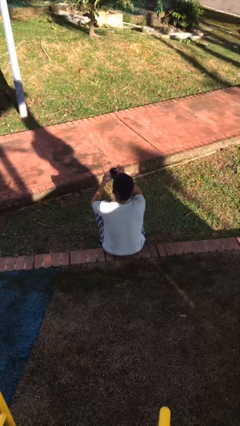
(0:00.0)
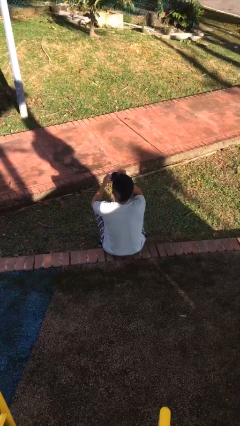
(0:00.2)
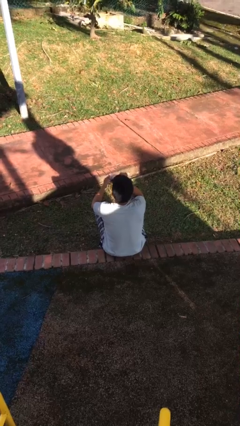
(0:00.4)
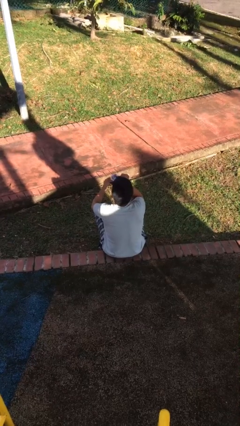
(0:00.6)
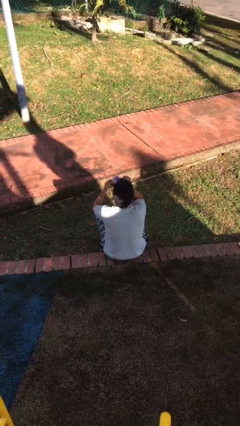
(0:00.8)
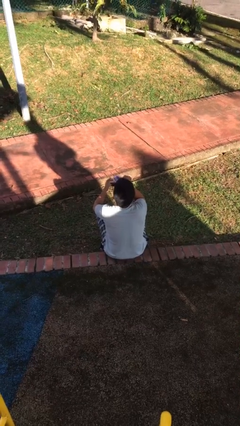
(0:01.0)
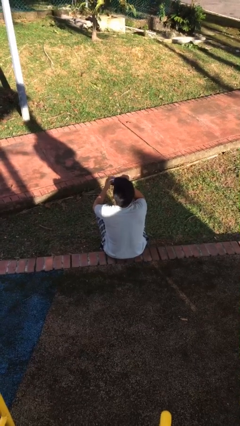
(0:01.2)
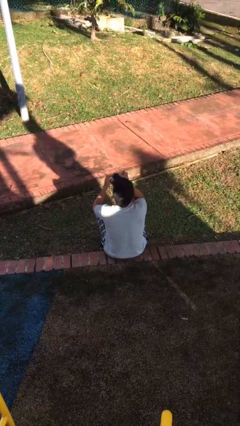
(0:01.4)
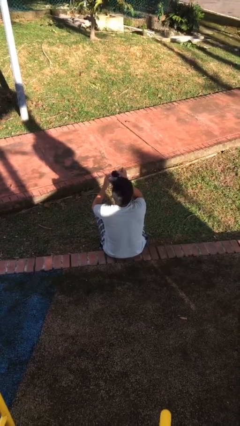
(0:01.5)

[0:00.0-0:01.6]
person drinks from mug

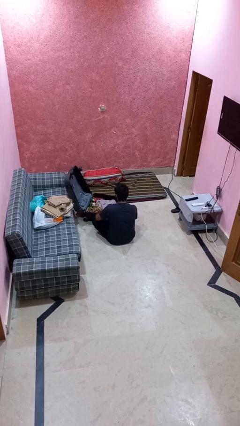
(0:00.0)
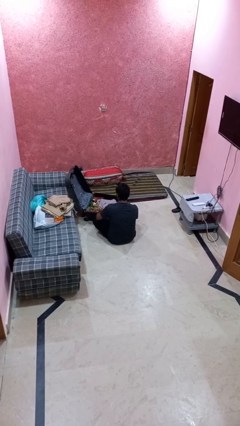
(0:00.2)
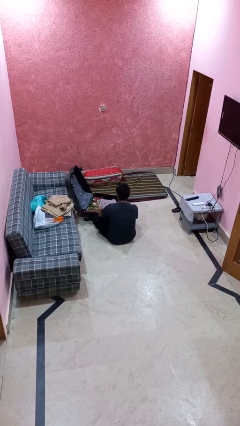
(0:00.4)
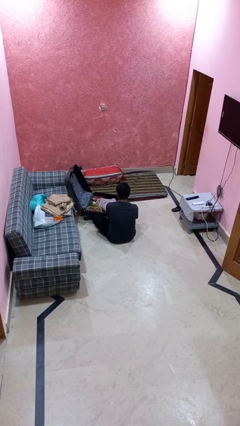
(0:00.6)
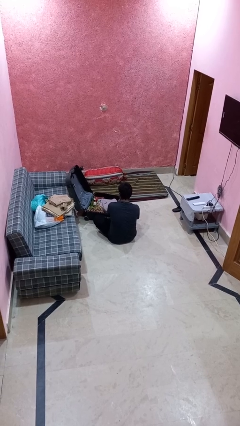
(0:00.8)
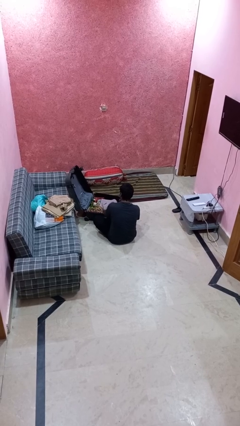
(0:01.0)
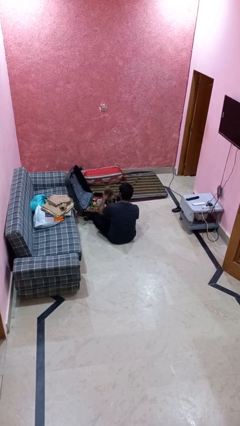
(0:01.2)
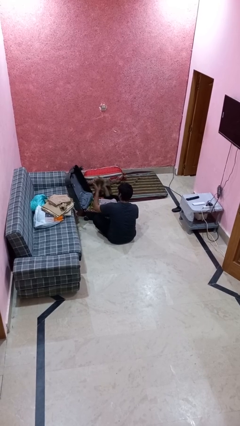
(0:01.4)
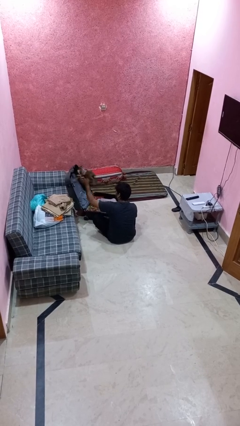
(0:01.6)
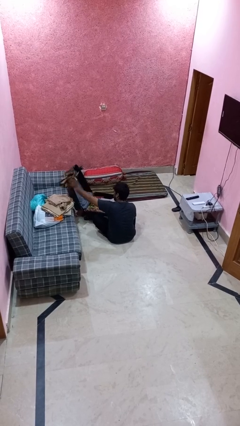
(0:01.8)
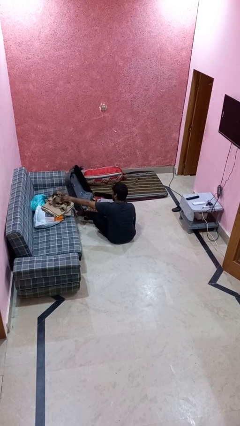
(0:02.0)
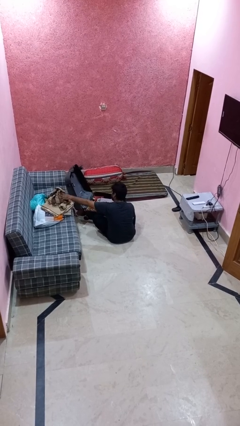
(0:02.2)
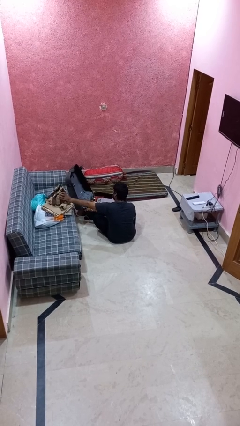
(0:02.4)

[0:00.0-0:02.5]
person unloads clothes from suitcase

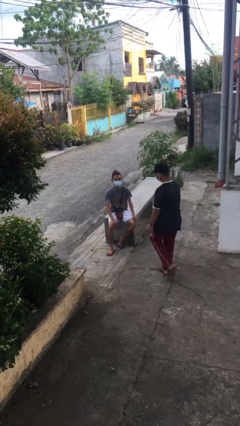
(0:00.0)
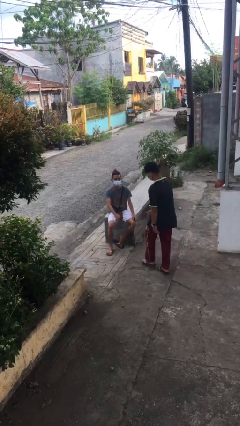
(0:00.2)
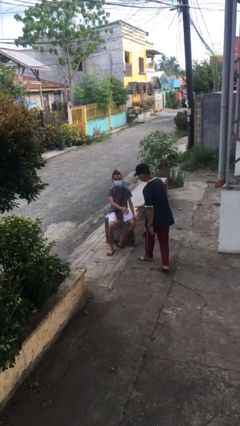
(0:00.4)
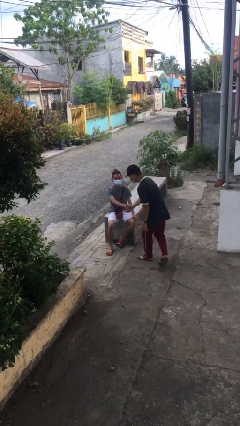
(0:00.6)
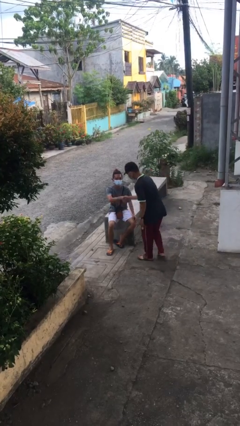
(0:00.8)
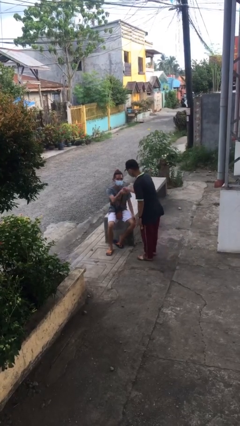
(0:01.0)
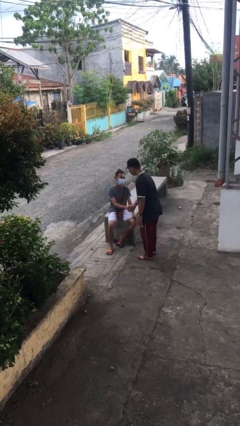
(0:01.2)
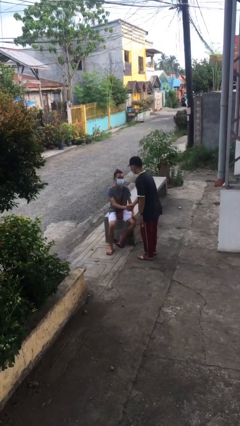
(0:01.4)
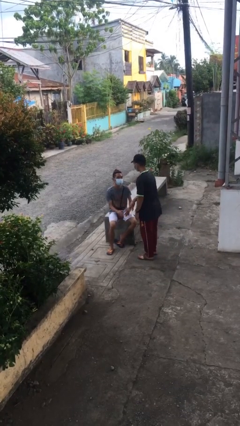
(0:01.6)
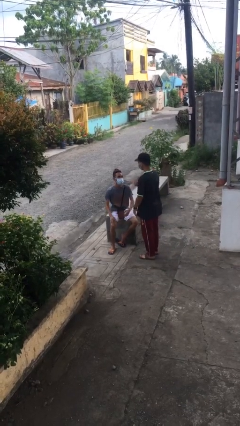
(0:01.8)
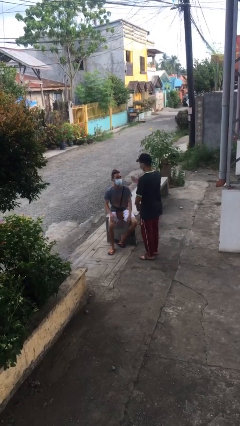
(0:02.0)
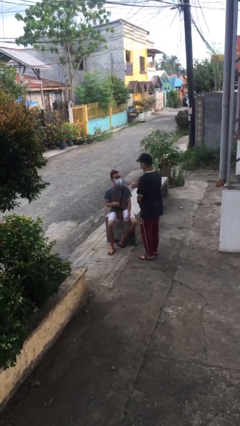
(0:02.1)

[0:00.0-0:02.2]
person shakes hand

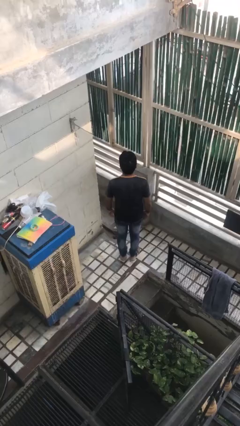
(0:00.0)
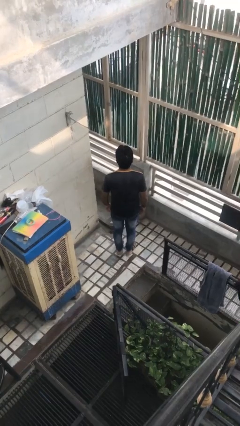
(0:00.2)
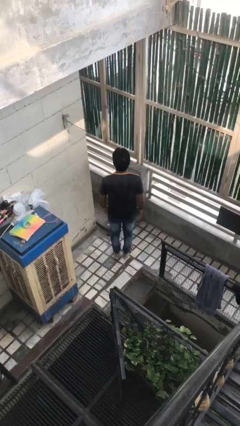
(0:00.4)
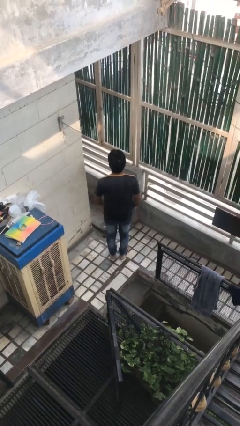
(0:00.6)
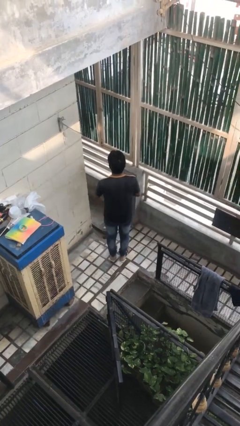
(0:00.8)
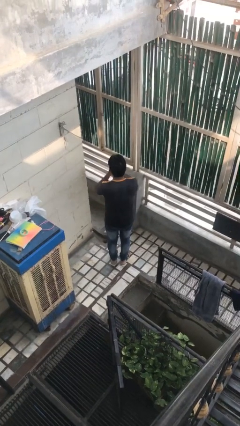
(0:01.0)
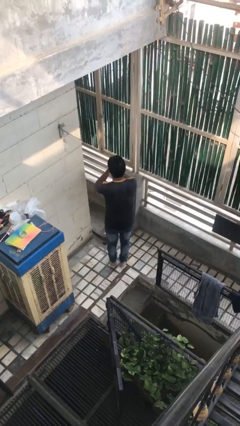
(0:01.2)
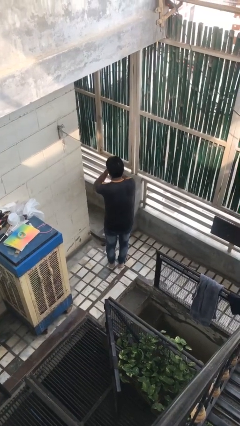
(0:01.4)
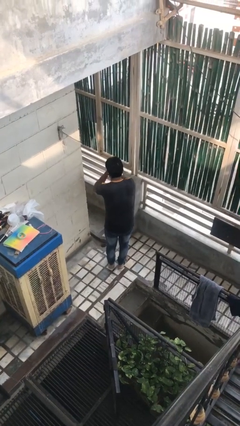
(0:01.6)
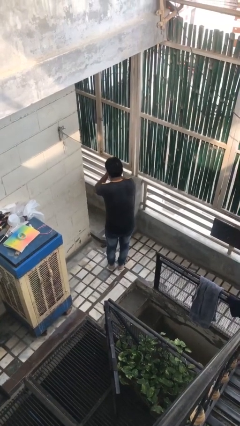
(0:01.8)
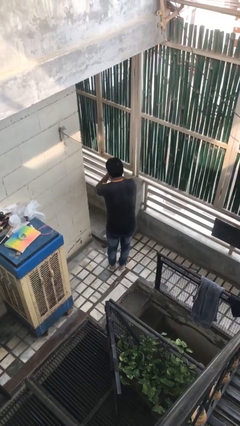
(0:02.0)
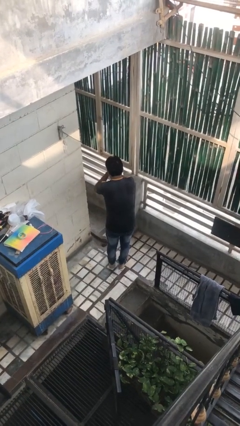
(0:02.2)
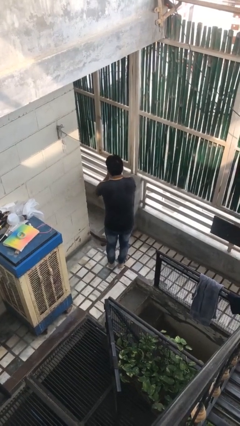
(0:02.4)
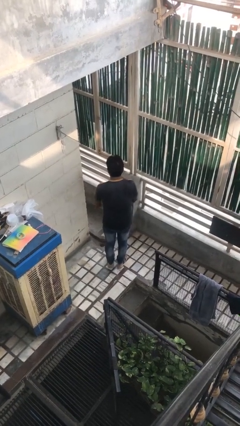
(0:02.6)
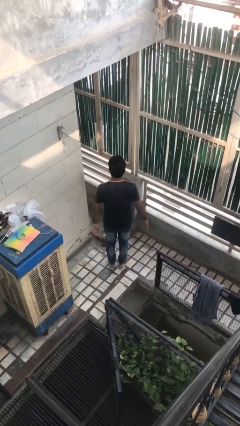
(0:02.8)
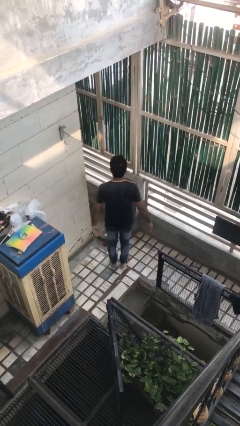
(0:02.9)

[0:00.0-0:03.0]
person prays

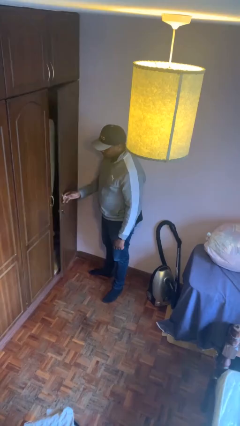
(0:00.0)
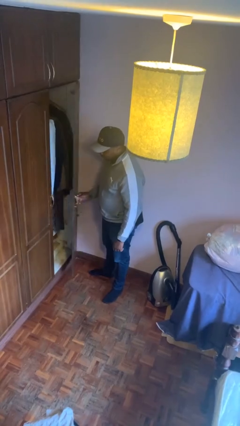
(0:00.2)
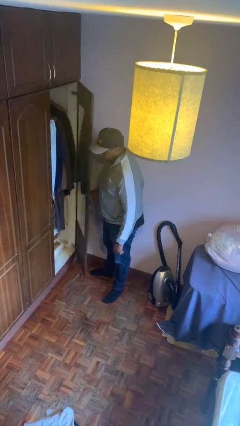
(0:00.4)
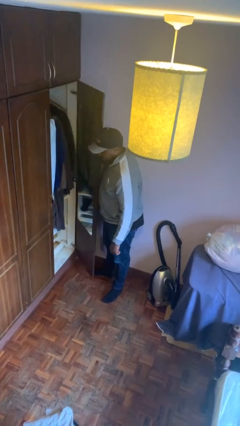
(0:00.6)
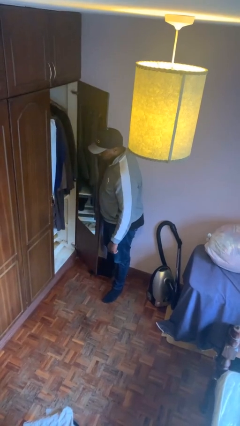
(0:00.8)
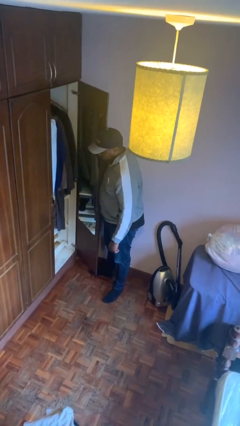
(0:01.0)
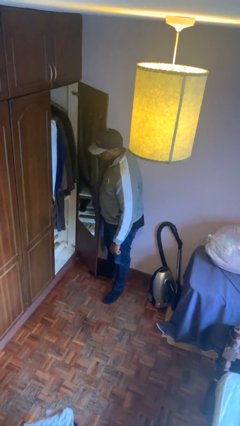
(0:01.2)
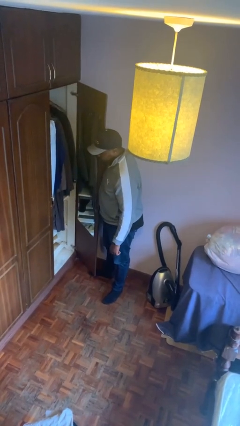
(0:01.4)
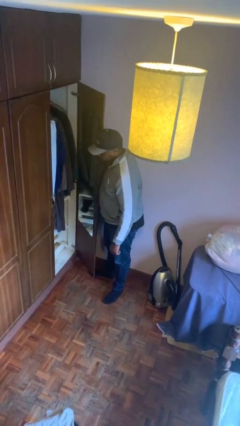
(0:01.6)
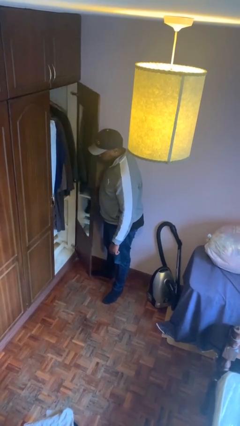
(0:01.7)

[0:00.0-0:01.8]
person opens closet door

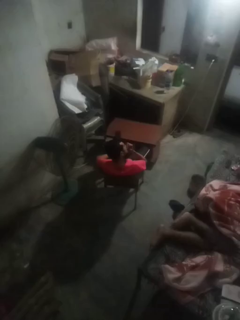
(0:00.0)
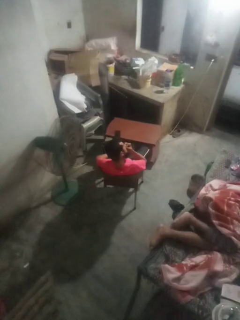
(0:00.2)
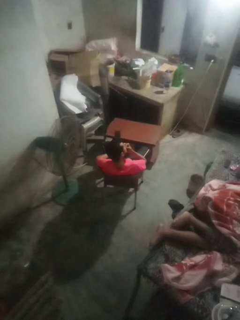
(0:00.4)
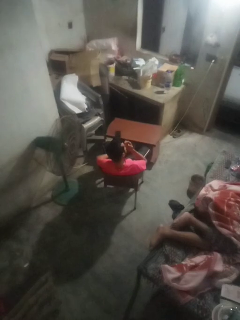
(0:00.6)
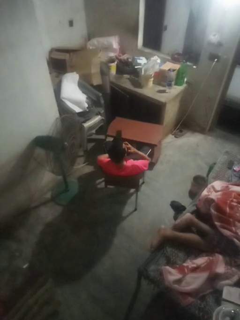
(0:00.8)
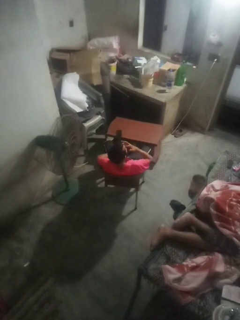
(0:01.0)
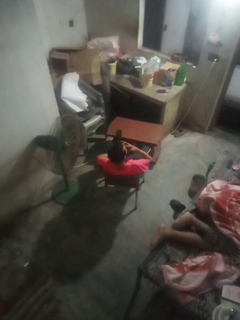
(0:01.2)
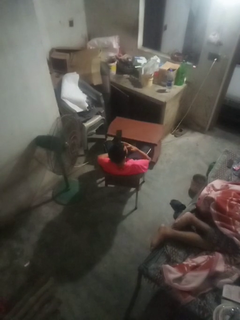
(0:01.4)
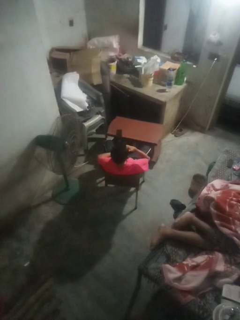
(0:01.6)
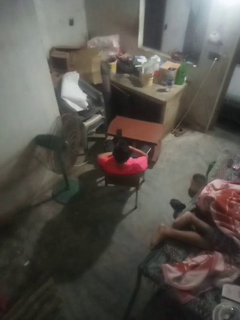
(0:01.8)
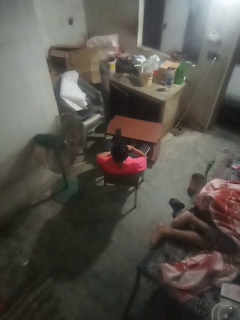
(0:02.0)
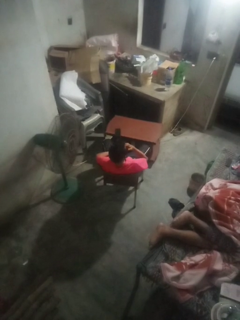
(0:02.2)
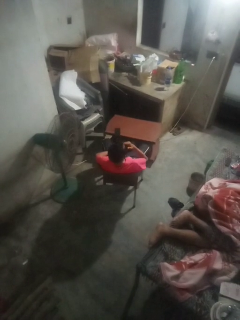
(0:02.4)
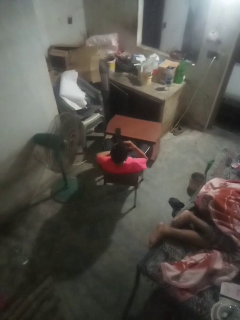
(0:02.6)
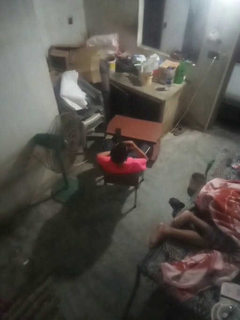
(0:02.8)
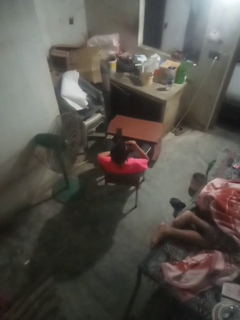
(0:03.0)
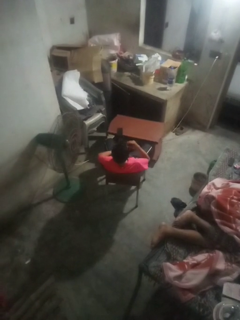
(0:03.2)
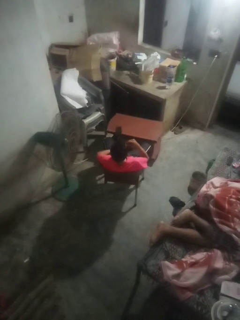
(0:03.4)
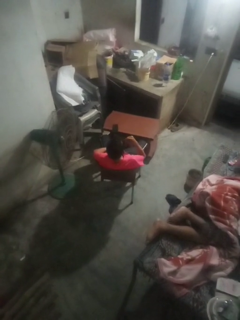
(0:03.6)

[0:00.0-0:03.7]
person licks fingers

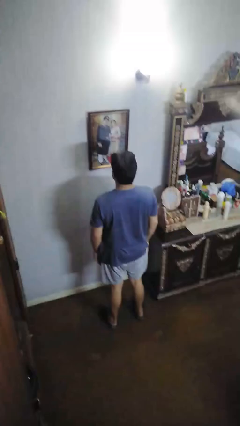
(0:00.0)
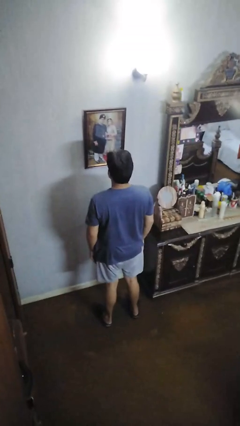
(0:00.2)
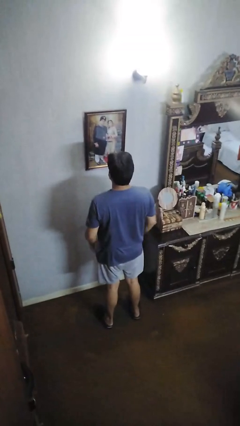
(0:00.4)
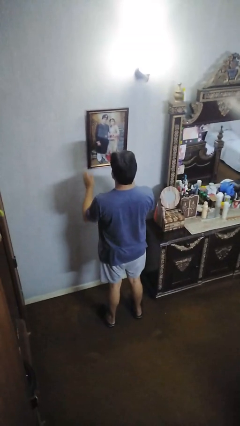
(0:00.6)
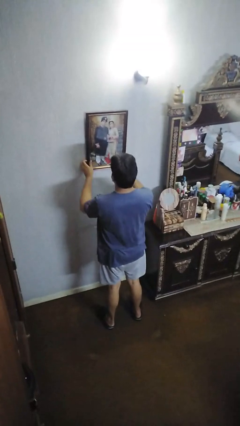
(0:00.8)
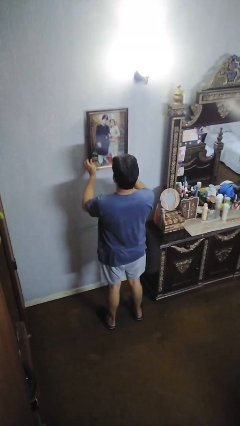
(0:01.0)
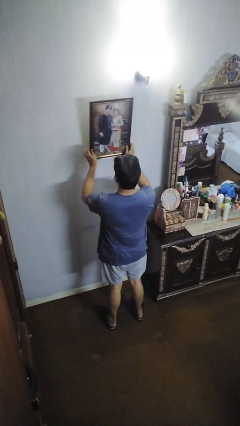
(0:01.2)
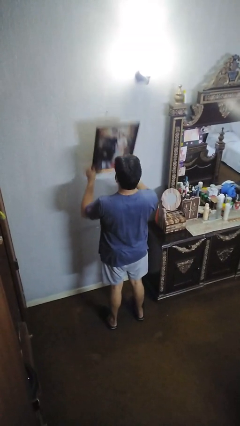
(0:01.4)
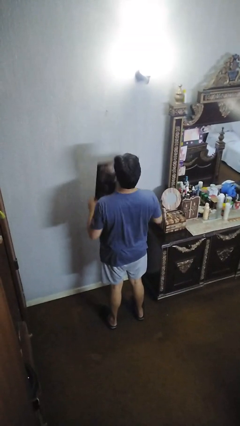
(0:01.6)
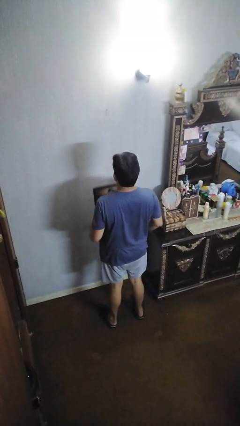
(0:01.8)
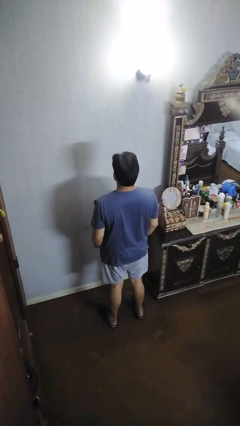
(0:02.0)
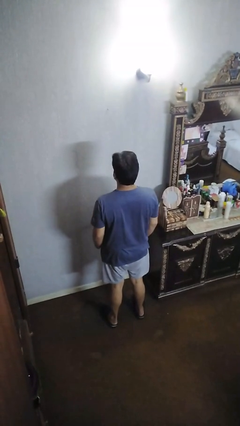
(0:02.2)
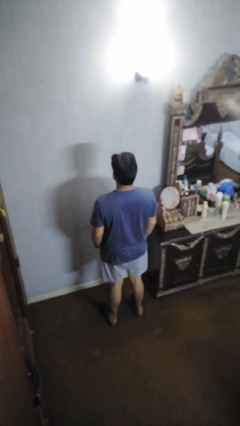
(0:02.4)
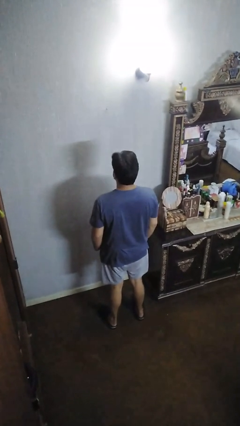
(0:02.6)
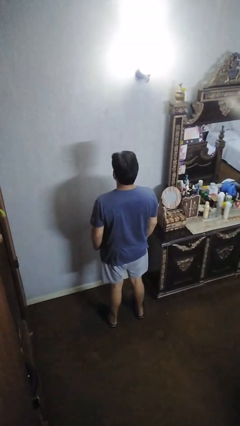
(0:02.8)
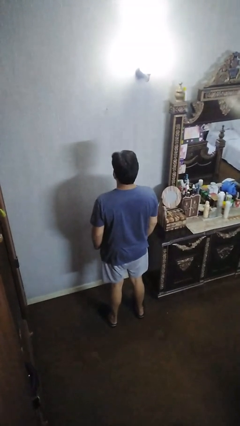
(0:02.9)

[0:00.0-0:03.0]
person takes down picture frame
